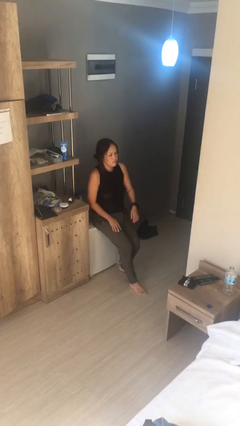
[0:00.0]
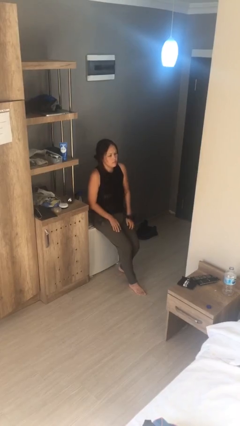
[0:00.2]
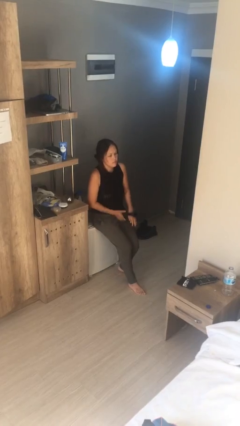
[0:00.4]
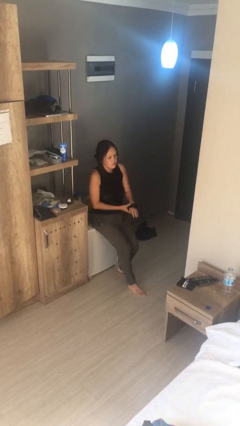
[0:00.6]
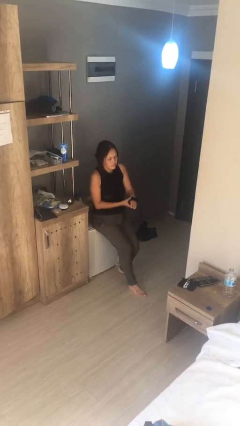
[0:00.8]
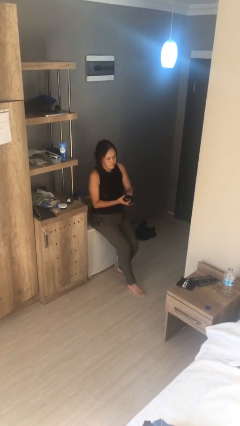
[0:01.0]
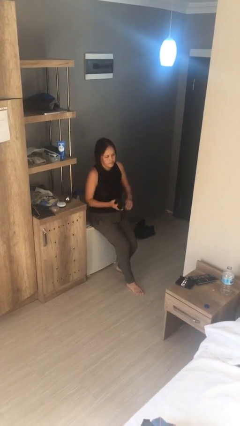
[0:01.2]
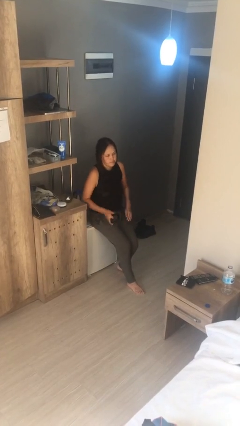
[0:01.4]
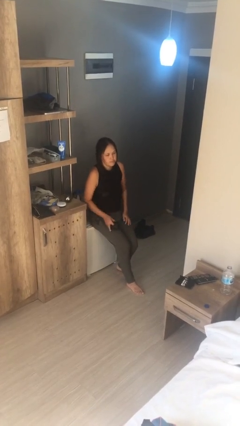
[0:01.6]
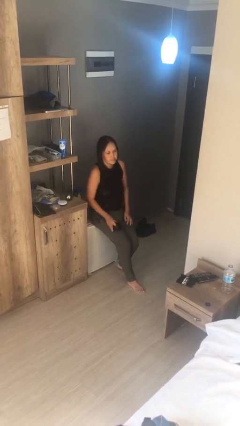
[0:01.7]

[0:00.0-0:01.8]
person takes off wristwatch

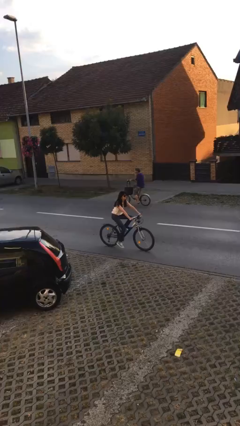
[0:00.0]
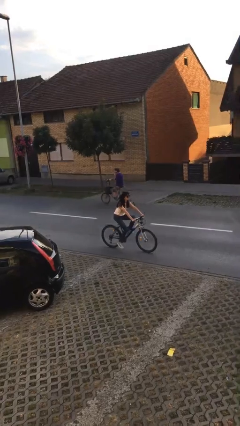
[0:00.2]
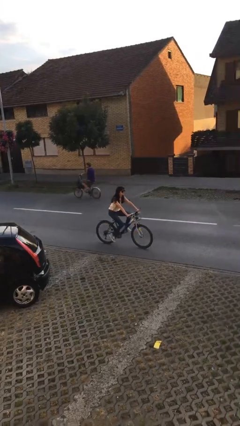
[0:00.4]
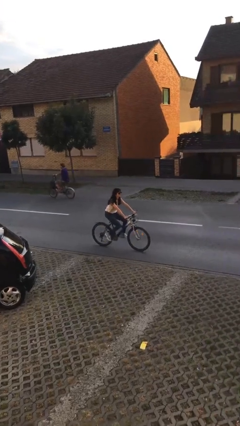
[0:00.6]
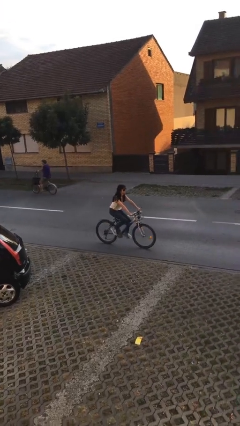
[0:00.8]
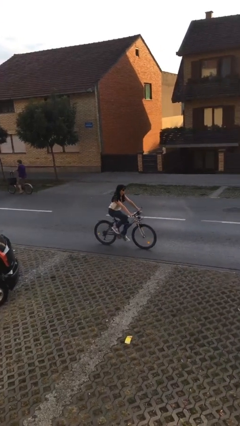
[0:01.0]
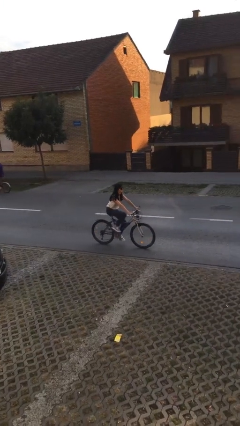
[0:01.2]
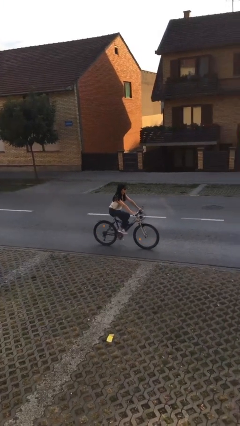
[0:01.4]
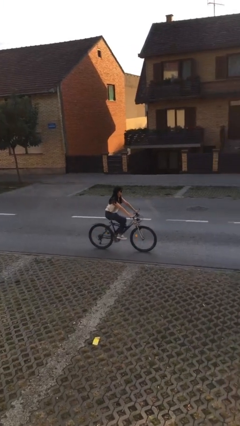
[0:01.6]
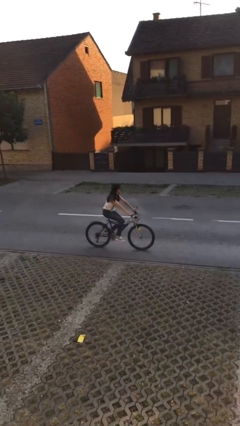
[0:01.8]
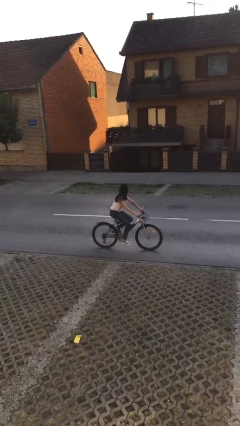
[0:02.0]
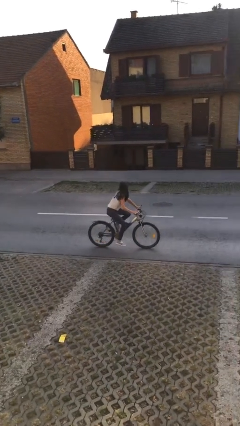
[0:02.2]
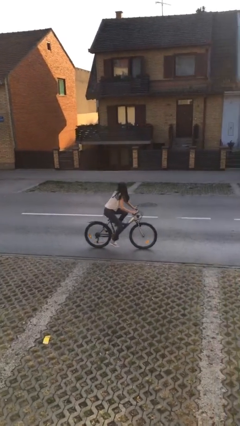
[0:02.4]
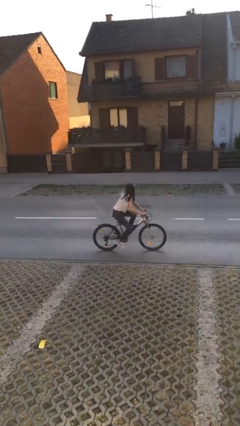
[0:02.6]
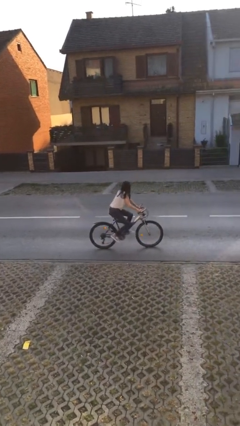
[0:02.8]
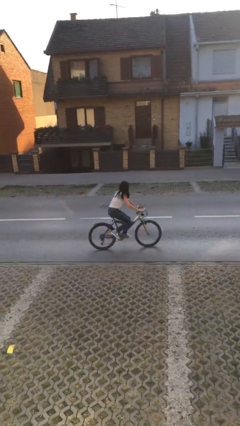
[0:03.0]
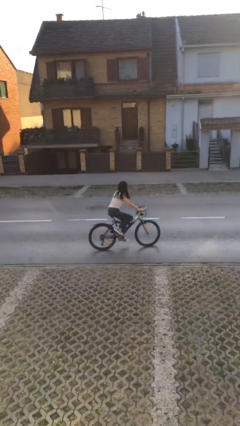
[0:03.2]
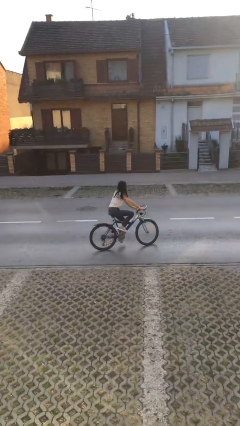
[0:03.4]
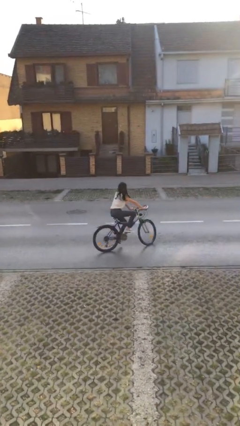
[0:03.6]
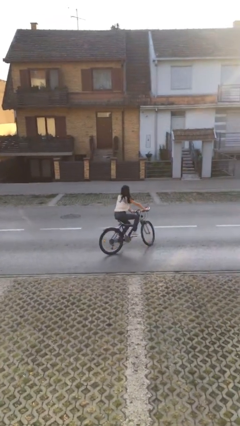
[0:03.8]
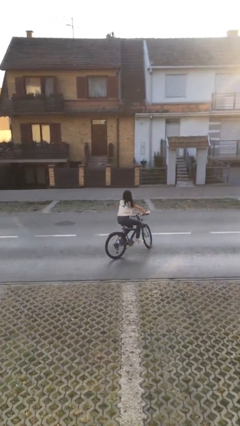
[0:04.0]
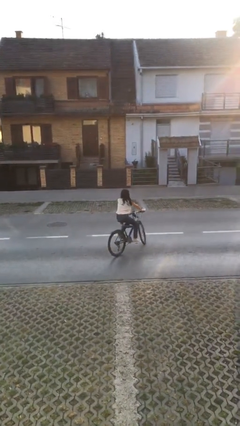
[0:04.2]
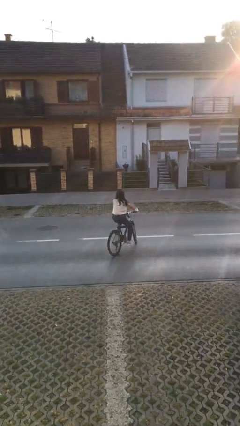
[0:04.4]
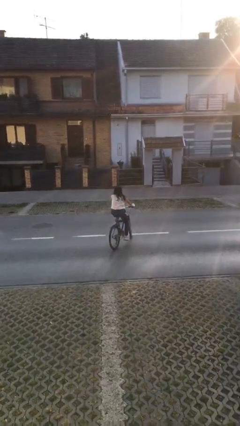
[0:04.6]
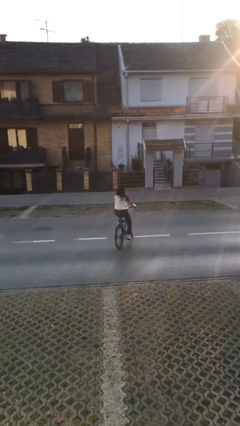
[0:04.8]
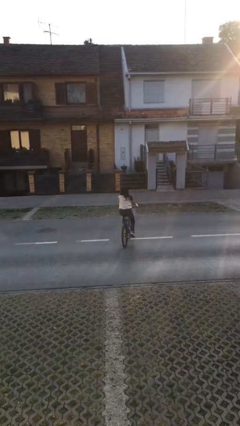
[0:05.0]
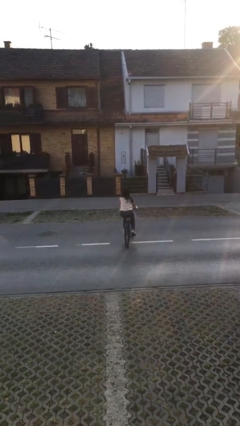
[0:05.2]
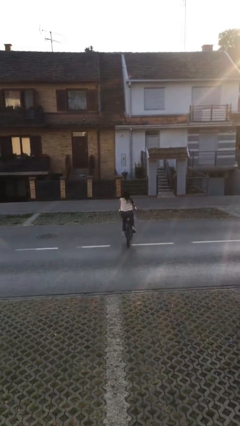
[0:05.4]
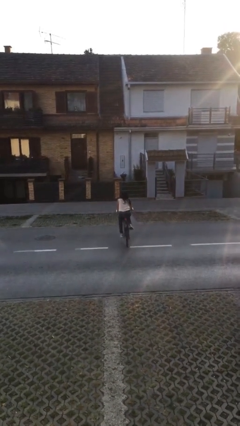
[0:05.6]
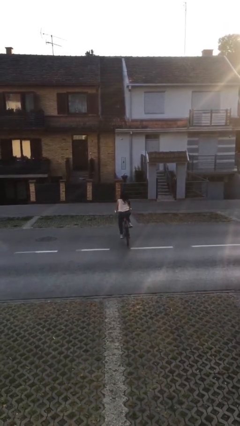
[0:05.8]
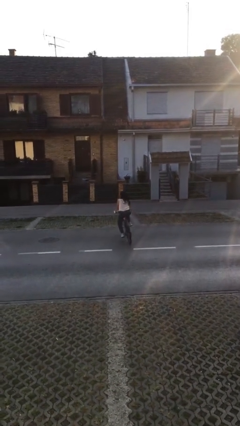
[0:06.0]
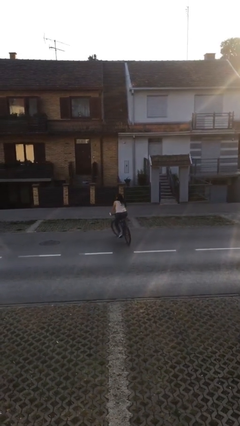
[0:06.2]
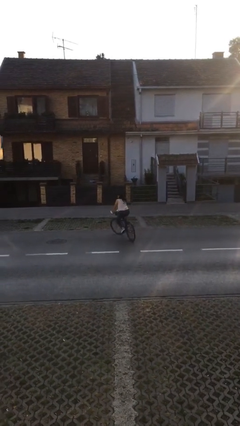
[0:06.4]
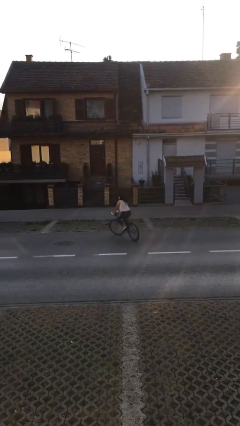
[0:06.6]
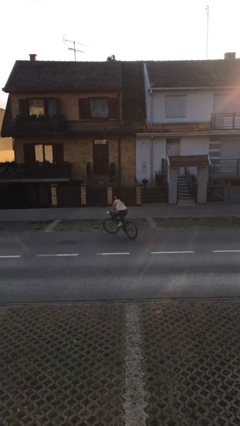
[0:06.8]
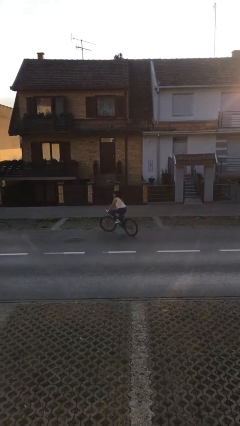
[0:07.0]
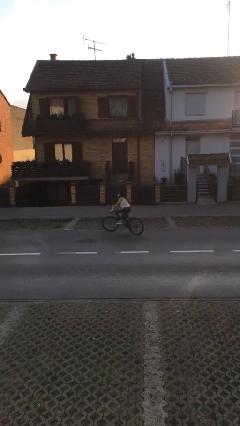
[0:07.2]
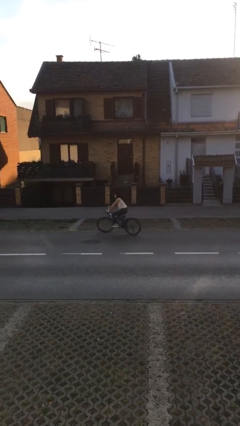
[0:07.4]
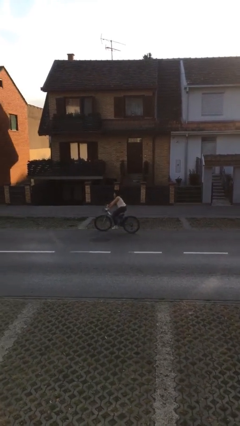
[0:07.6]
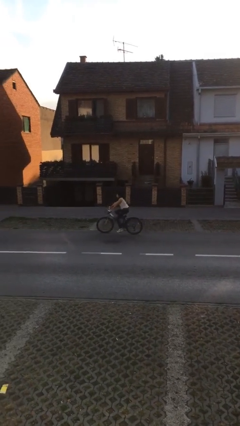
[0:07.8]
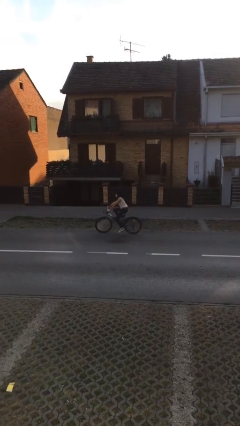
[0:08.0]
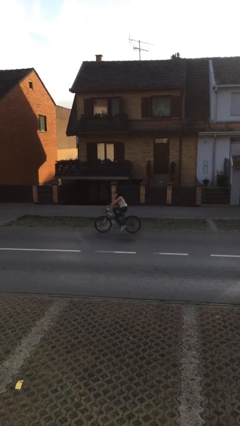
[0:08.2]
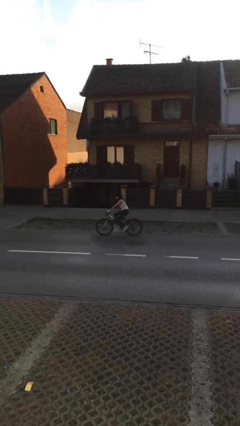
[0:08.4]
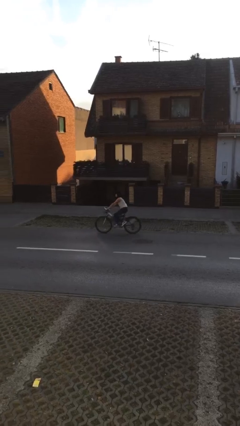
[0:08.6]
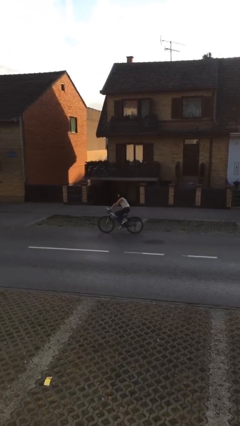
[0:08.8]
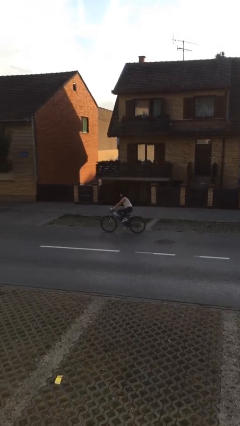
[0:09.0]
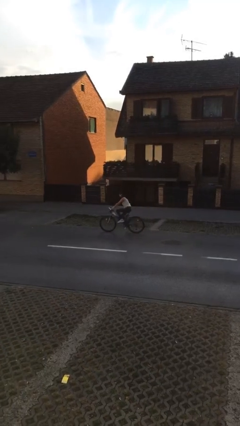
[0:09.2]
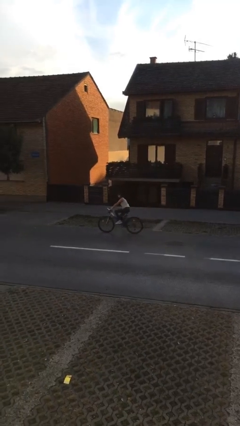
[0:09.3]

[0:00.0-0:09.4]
person rides bicycle

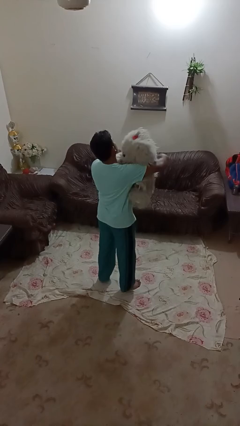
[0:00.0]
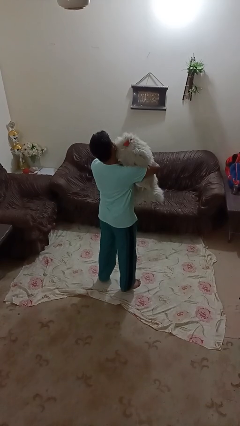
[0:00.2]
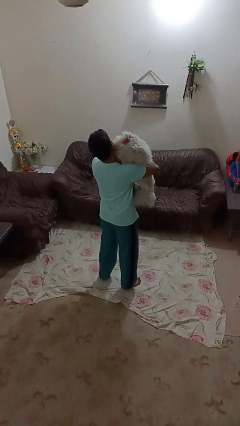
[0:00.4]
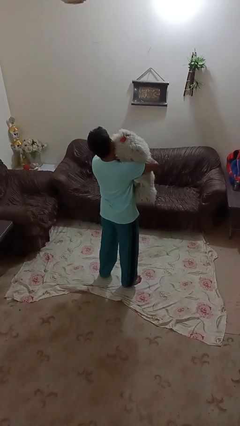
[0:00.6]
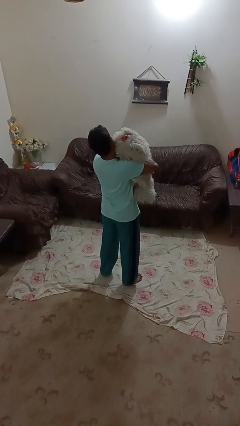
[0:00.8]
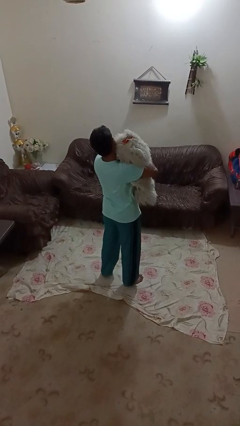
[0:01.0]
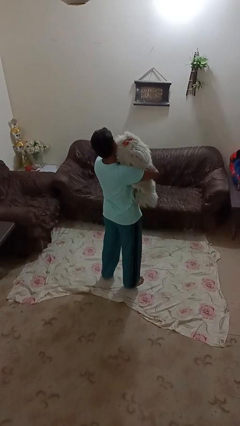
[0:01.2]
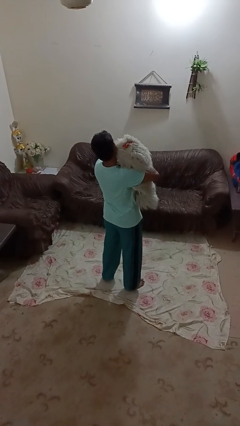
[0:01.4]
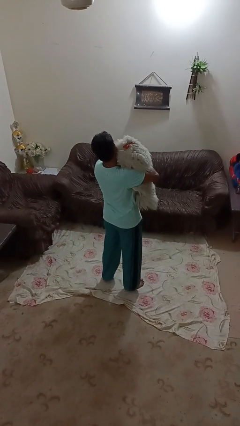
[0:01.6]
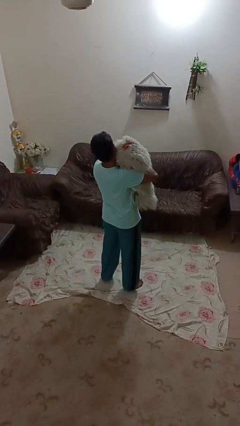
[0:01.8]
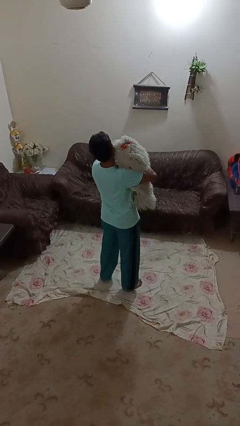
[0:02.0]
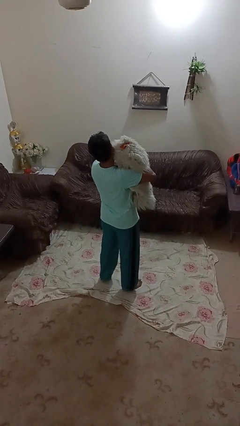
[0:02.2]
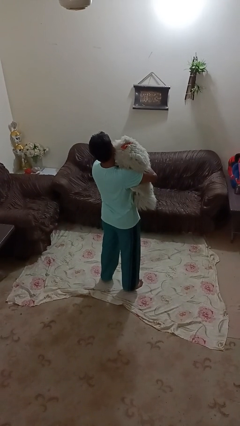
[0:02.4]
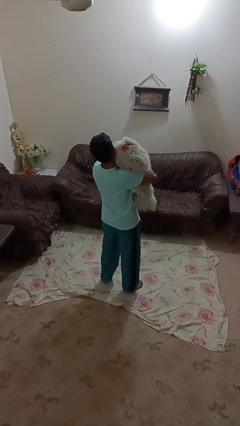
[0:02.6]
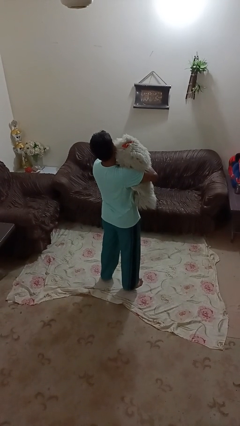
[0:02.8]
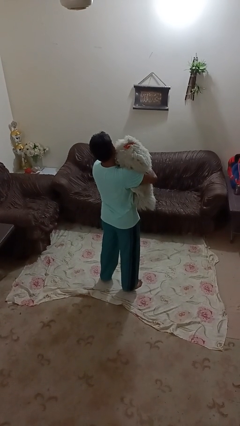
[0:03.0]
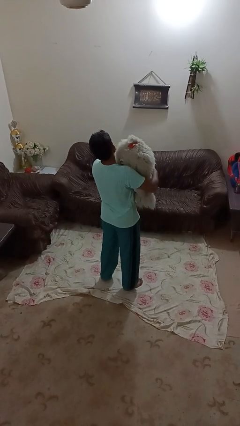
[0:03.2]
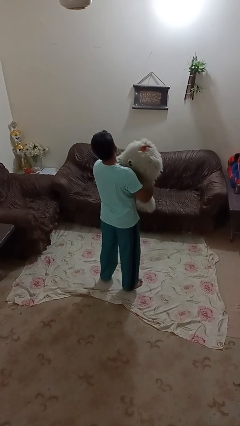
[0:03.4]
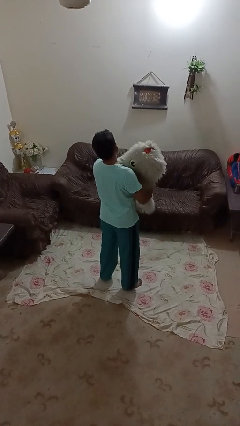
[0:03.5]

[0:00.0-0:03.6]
person hugs stuffed animal

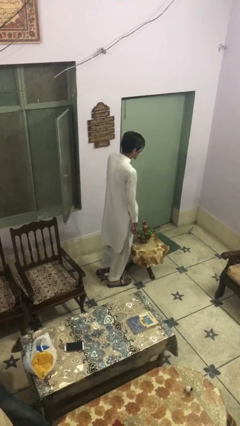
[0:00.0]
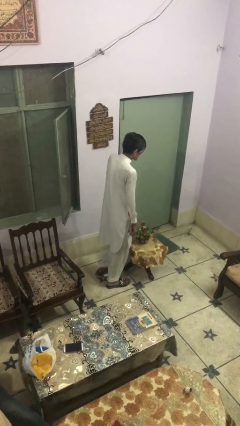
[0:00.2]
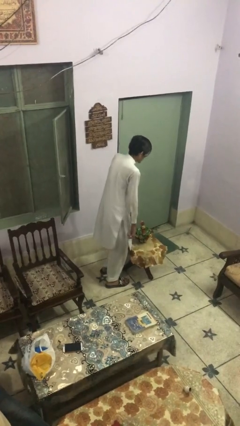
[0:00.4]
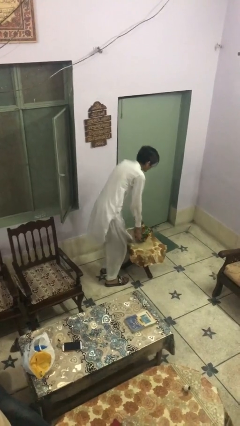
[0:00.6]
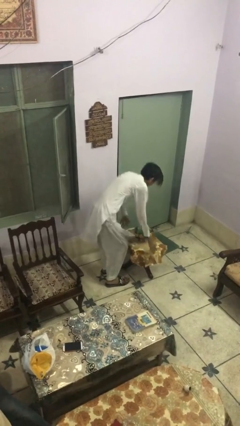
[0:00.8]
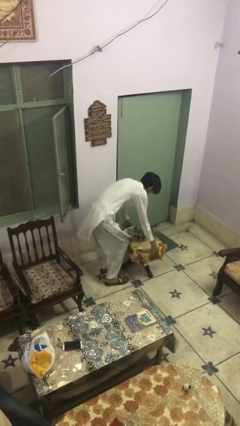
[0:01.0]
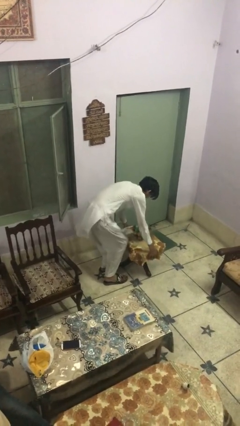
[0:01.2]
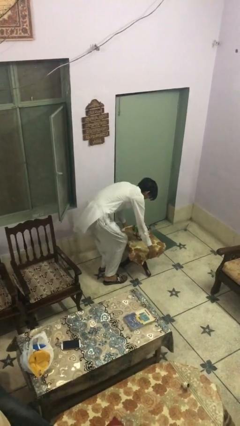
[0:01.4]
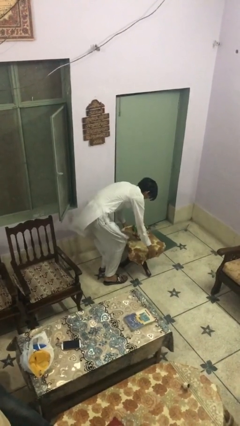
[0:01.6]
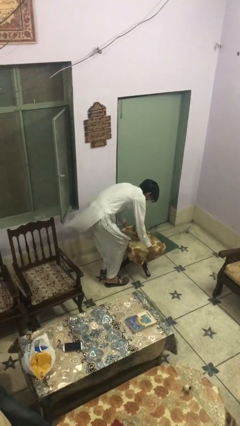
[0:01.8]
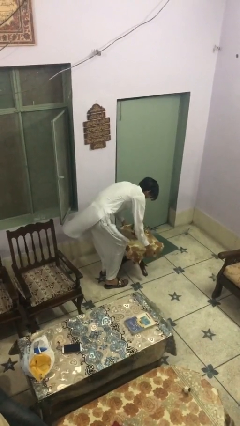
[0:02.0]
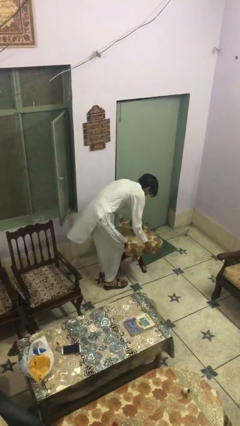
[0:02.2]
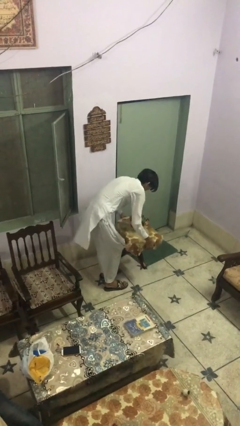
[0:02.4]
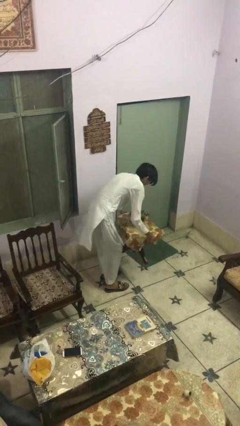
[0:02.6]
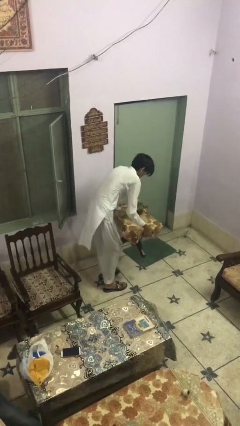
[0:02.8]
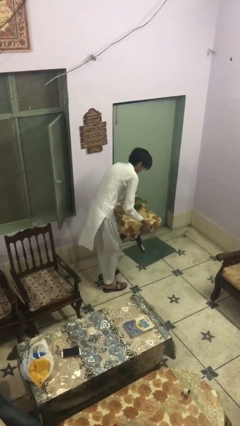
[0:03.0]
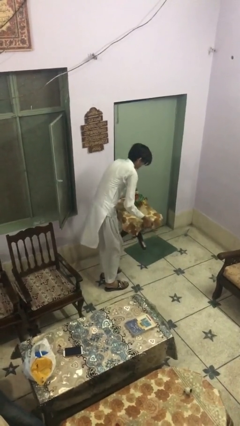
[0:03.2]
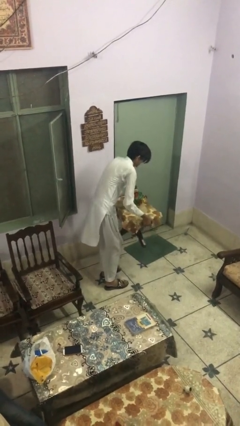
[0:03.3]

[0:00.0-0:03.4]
person picks up object from floor
